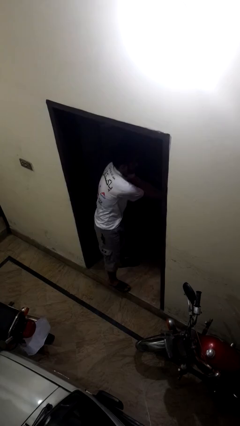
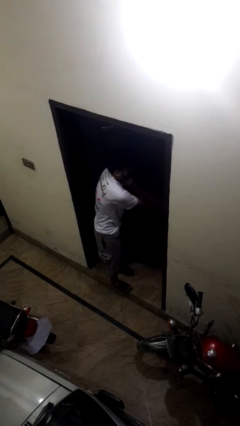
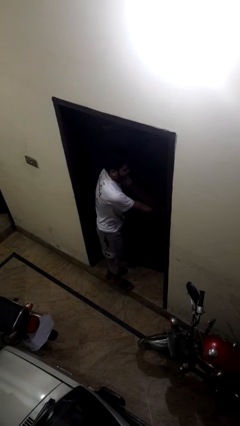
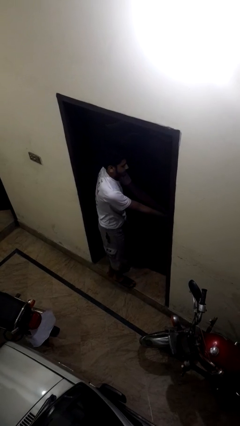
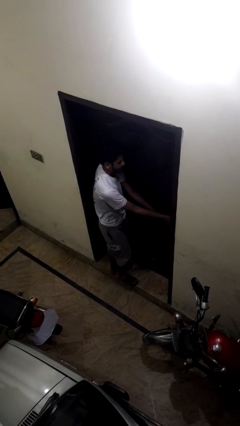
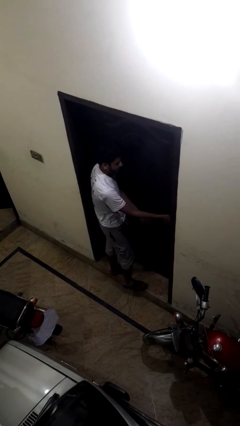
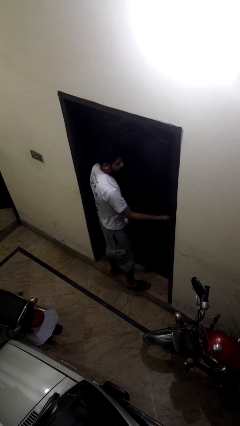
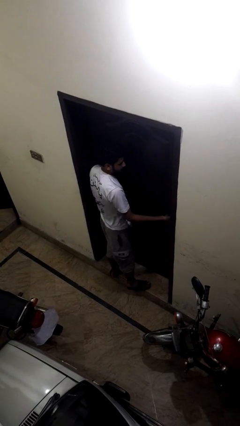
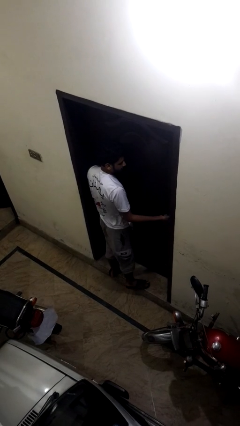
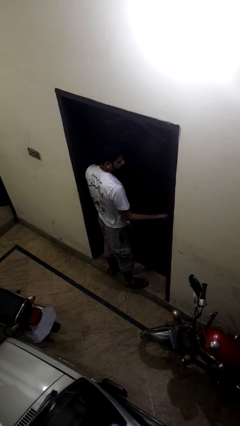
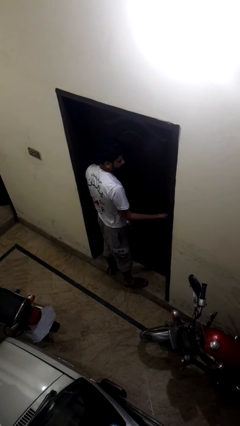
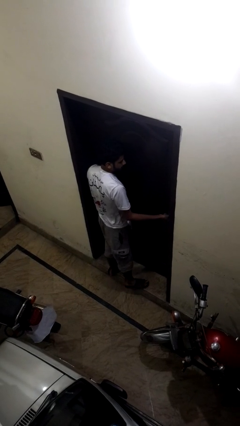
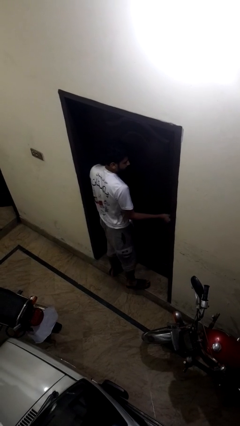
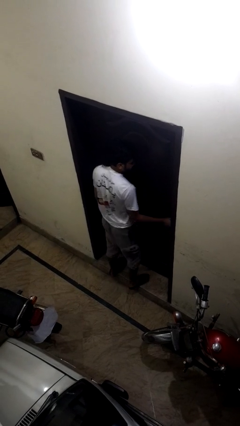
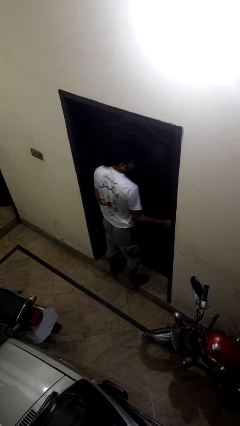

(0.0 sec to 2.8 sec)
person closes facility door

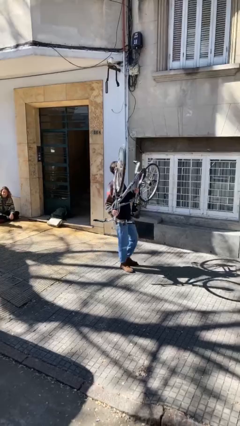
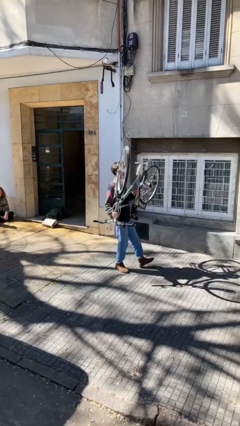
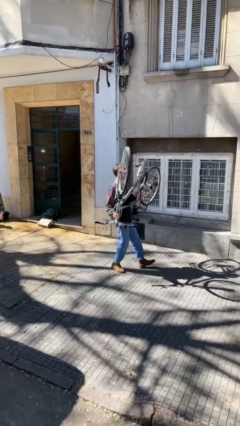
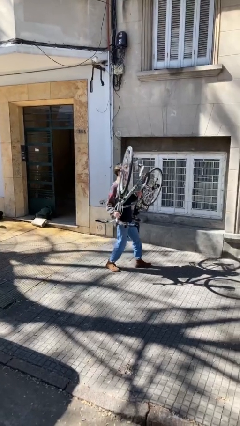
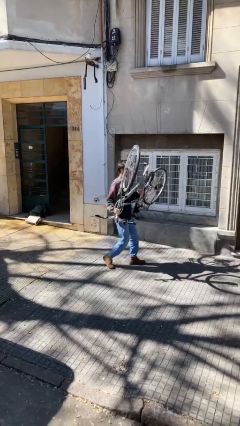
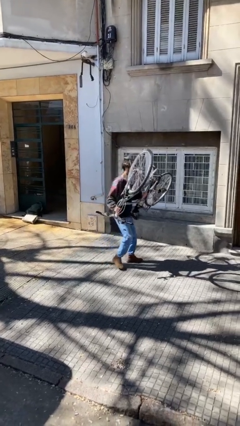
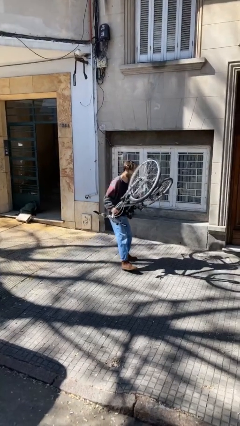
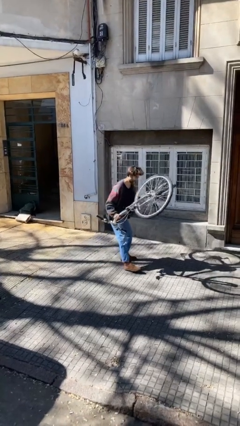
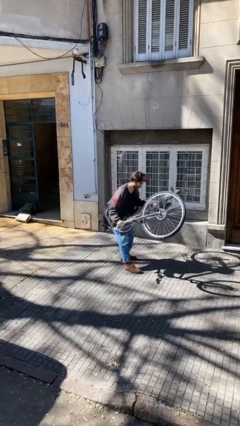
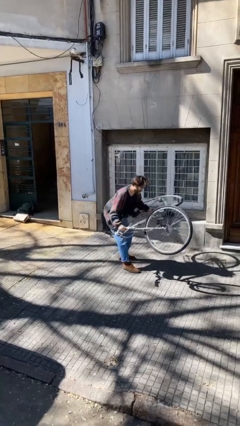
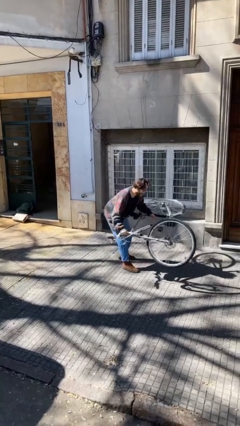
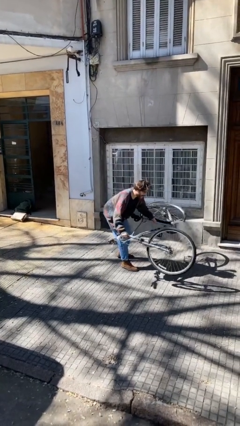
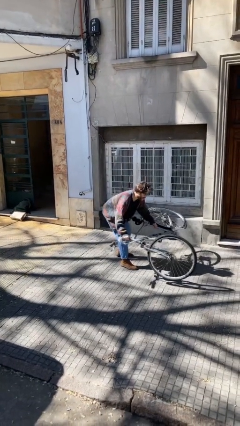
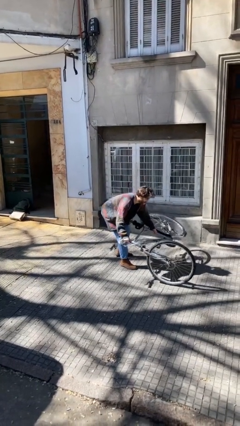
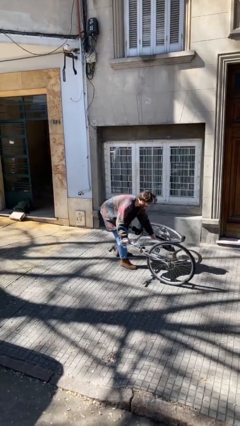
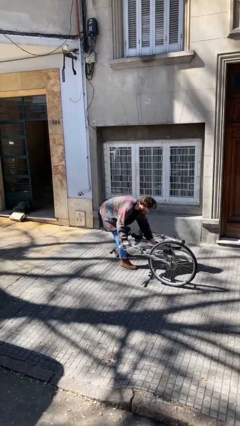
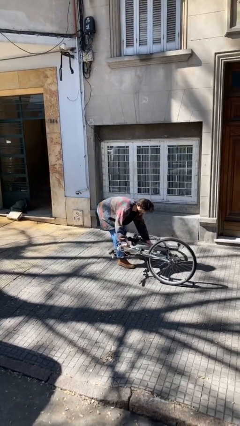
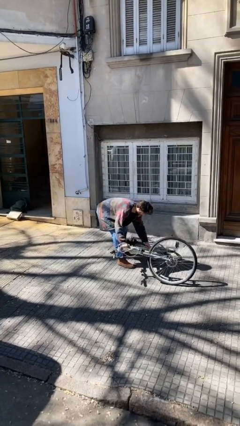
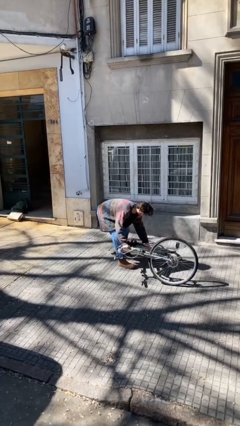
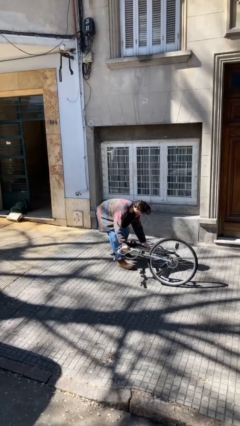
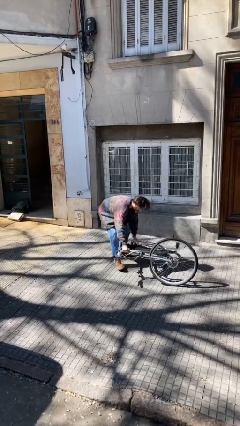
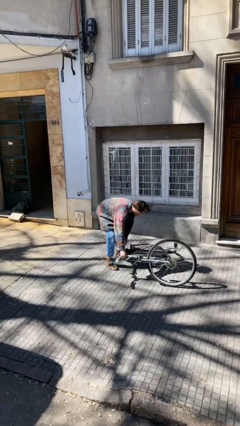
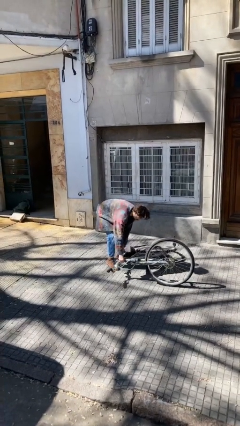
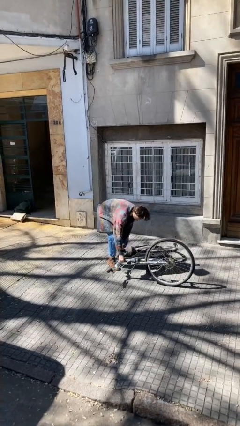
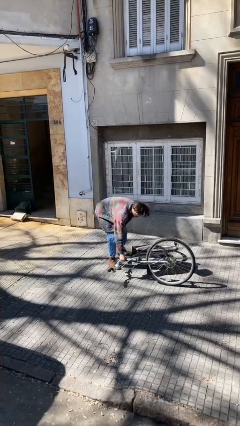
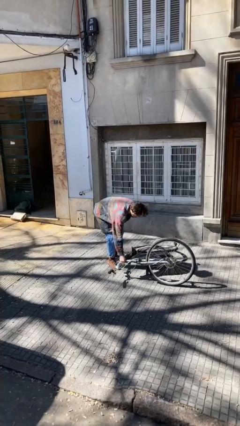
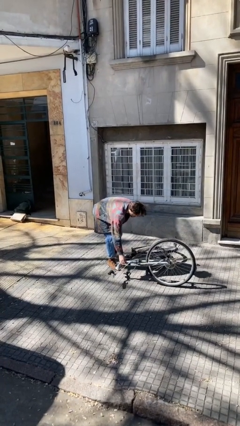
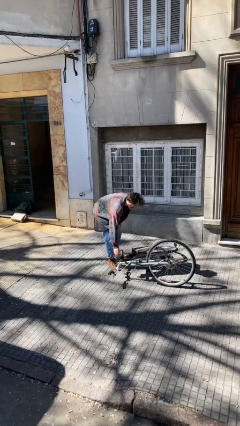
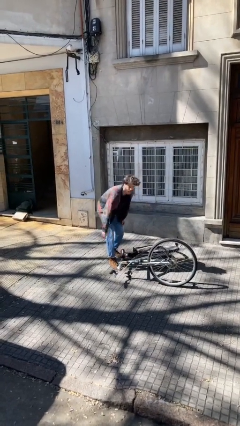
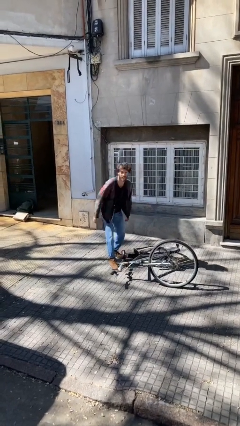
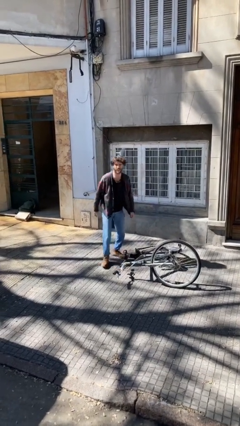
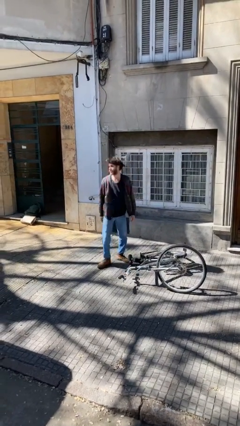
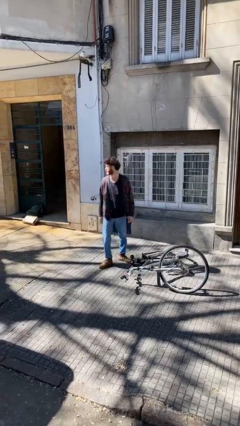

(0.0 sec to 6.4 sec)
person puts down object on floor

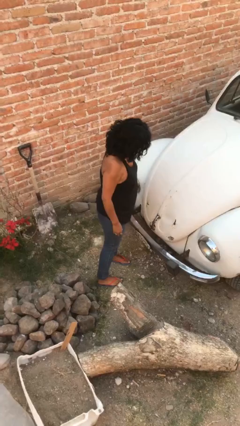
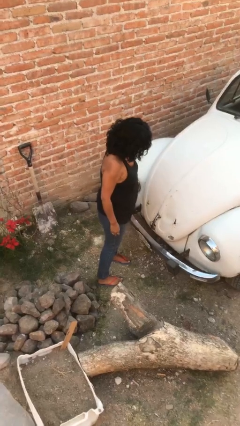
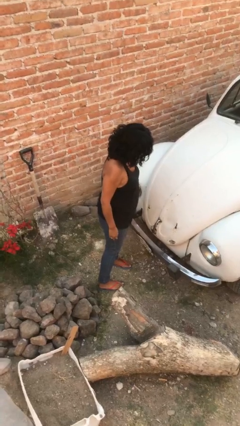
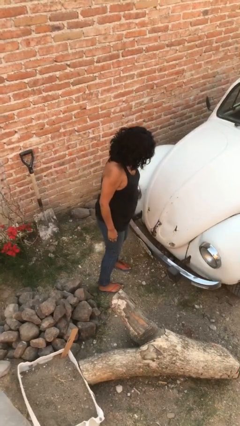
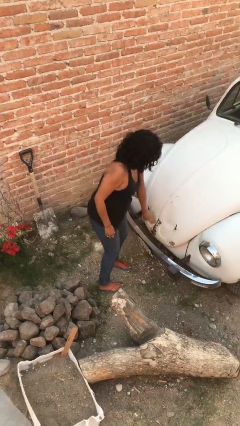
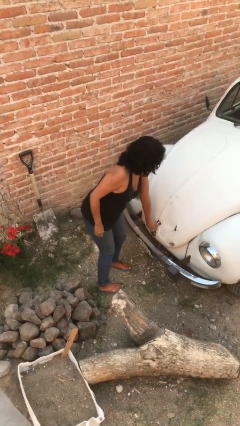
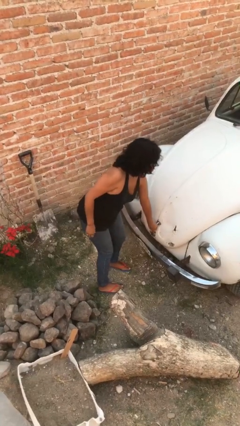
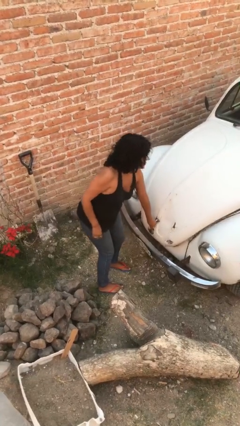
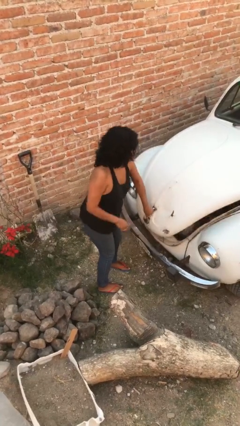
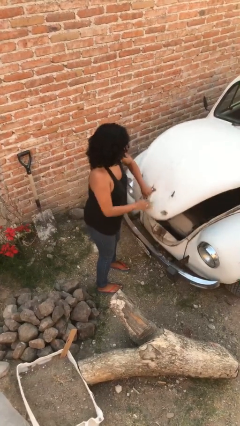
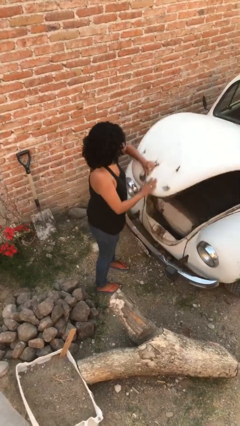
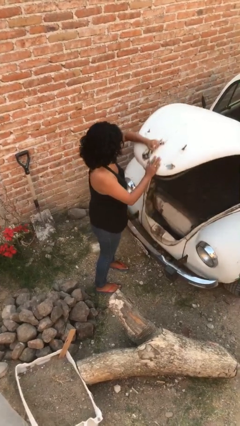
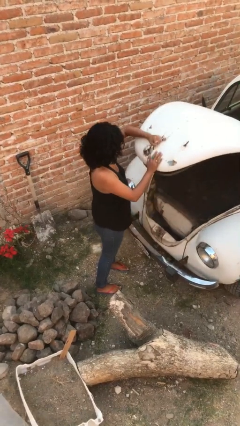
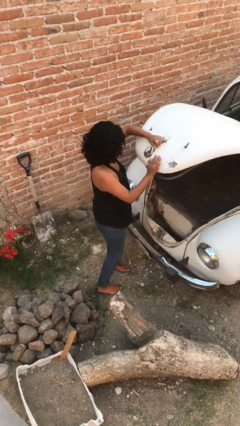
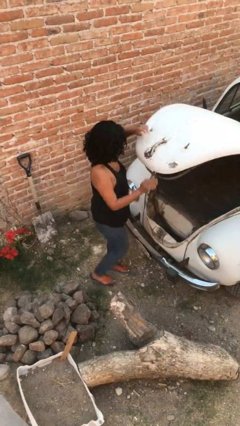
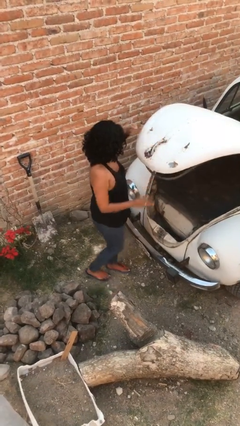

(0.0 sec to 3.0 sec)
person opens car trunk

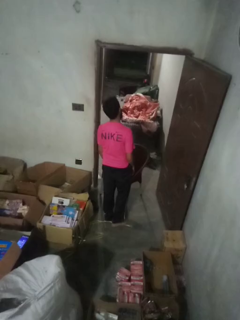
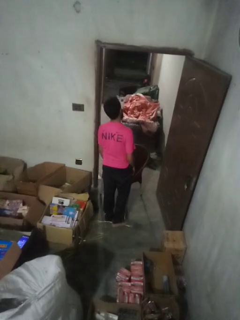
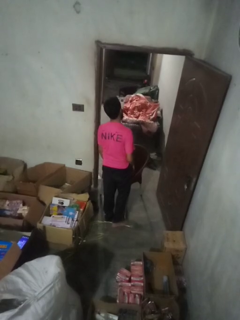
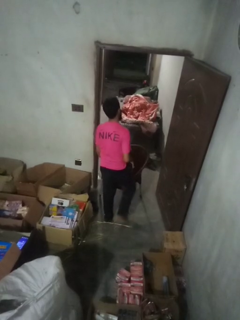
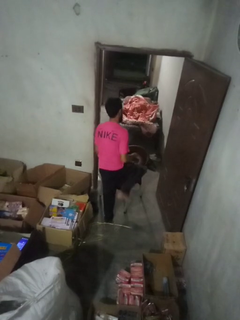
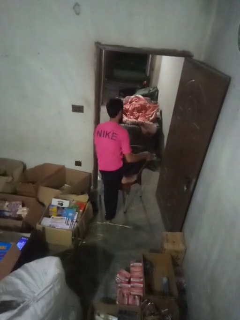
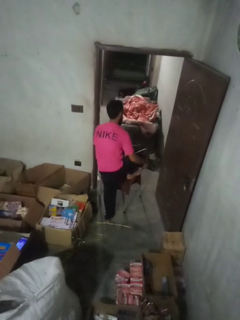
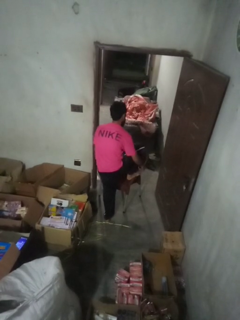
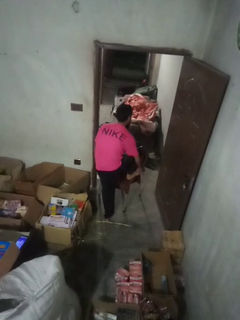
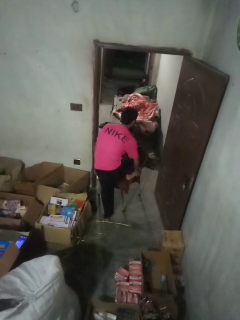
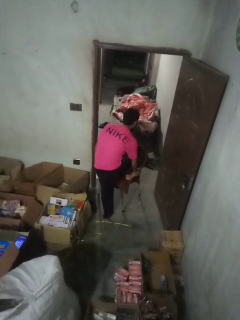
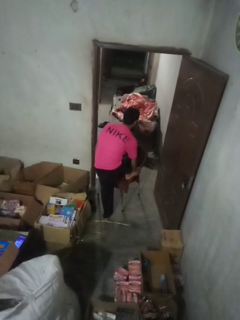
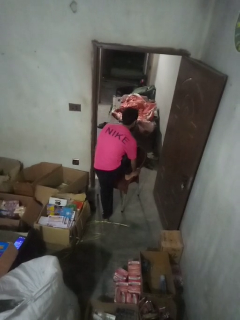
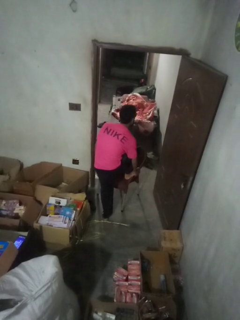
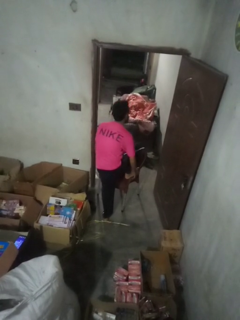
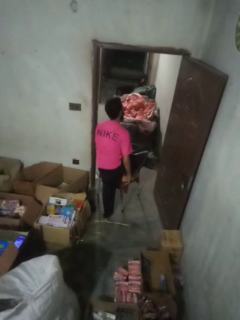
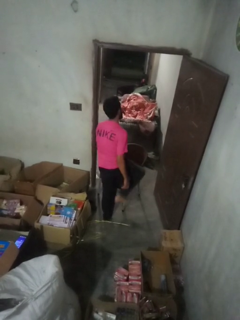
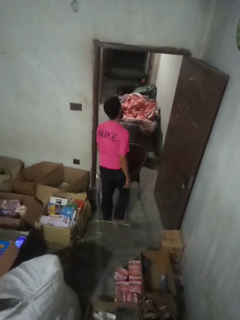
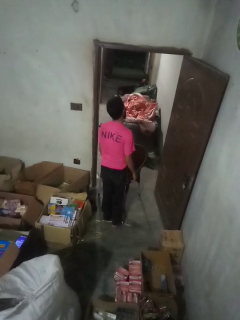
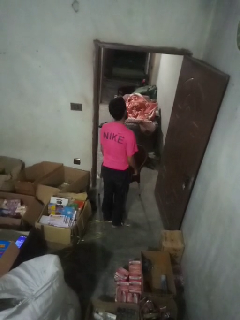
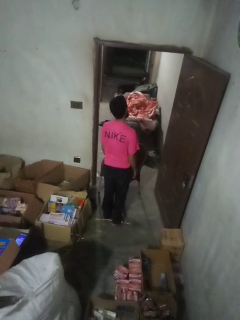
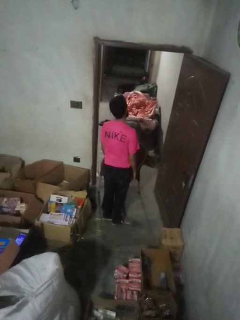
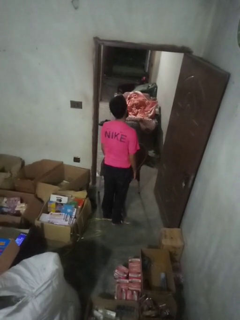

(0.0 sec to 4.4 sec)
person stubs toe

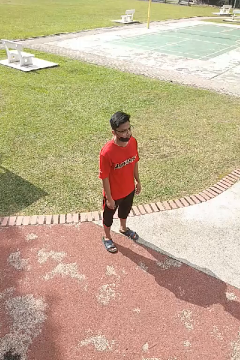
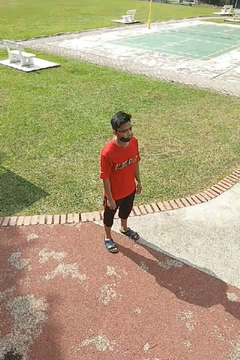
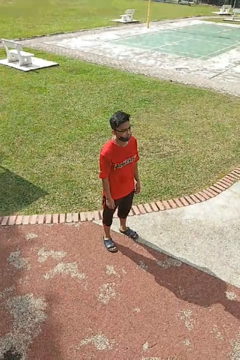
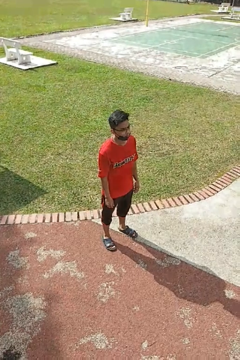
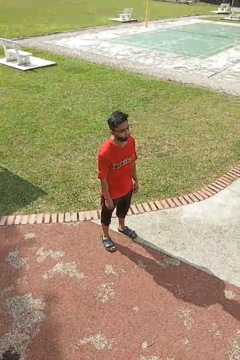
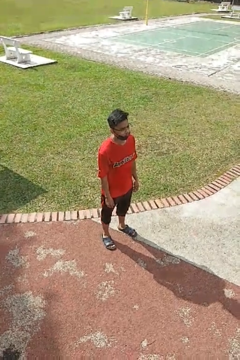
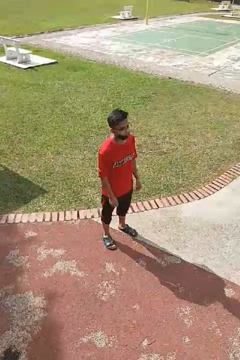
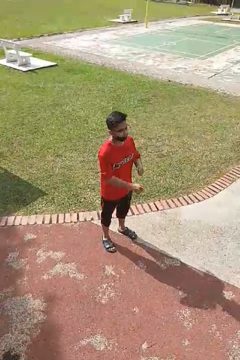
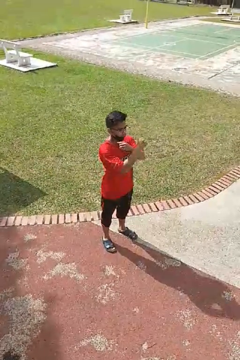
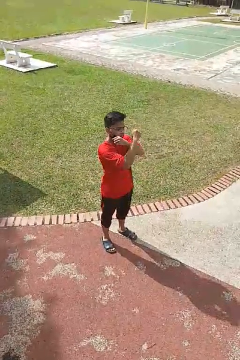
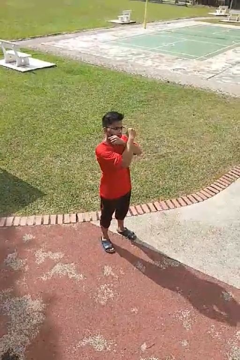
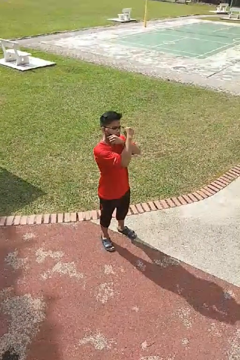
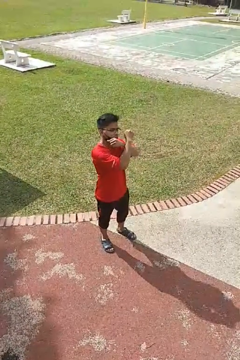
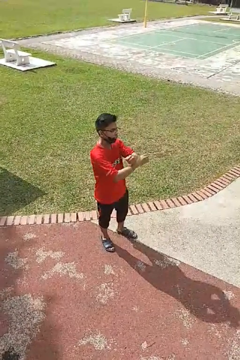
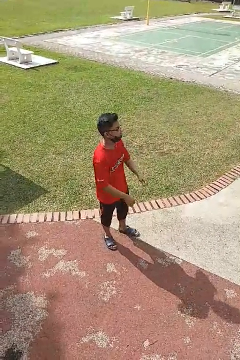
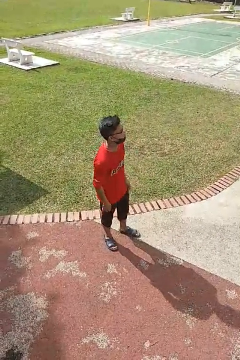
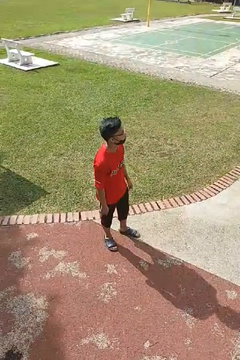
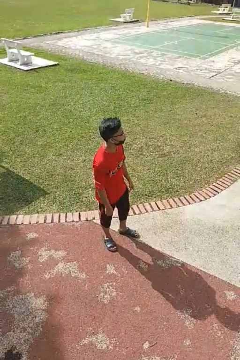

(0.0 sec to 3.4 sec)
person gestures arms x
